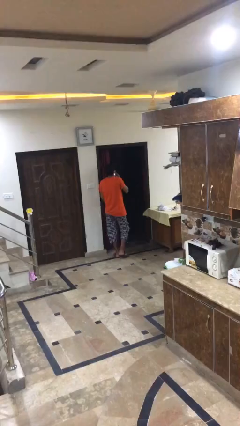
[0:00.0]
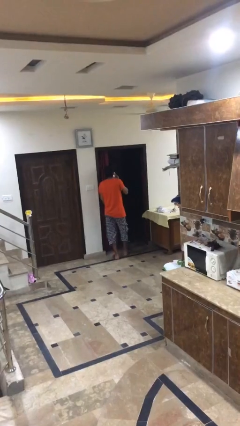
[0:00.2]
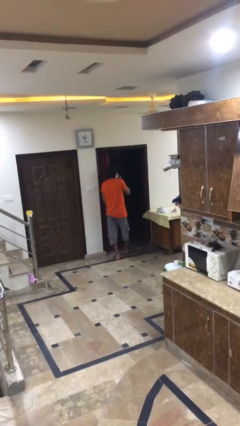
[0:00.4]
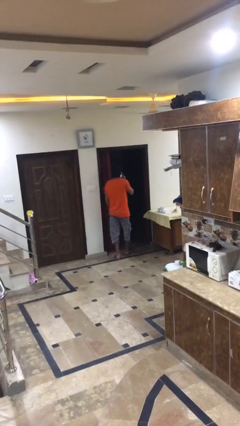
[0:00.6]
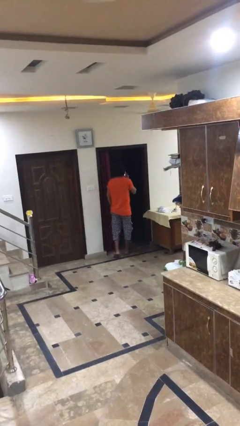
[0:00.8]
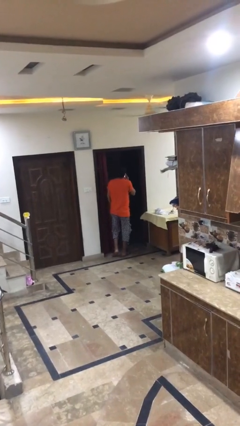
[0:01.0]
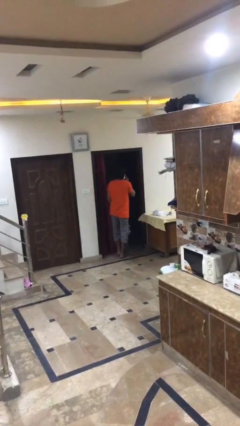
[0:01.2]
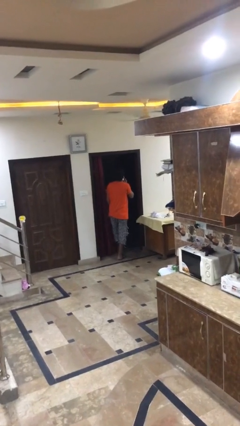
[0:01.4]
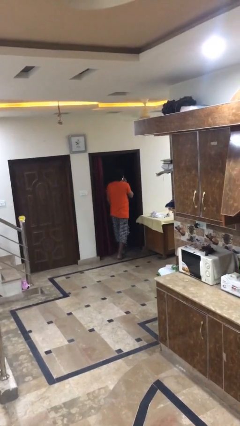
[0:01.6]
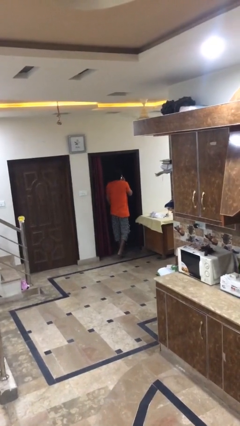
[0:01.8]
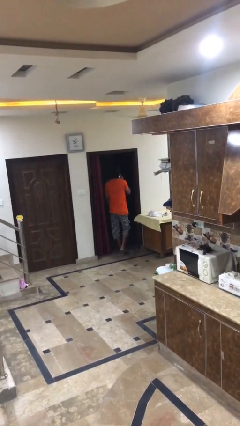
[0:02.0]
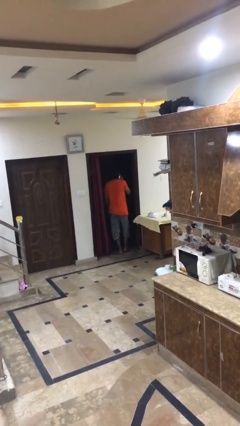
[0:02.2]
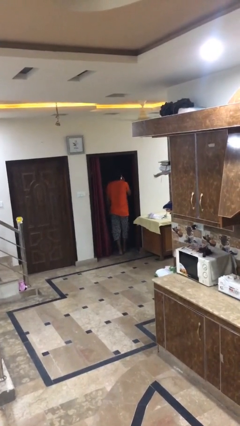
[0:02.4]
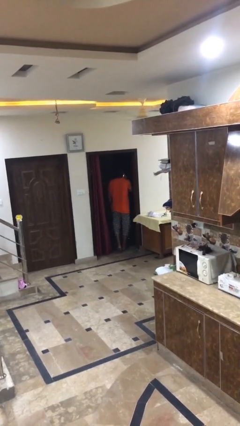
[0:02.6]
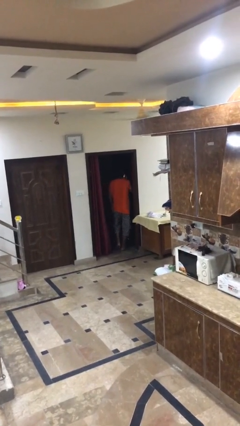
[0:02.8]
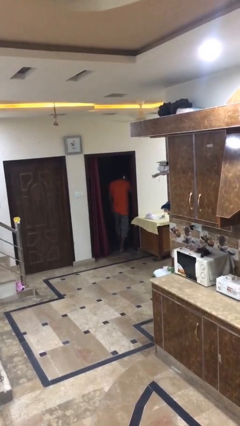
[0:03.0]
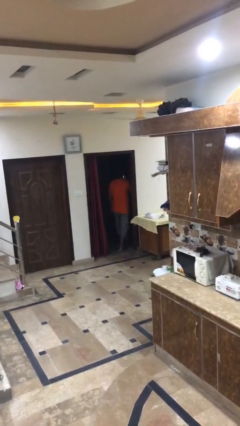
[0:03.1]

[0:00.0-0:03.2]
person exits scene through structure

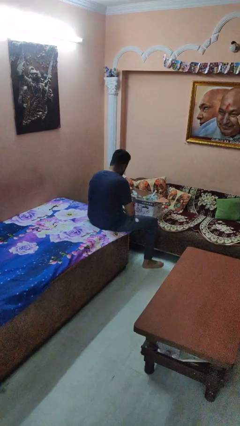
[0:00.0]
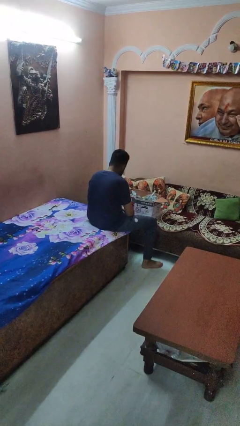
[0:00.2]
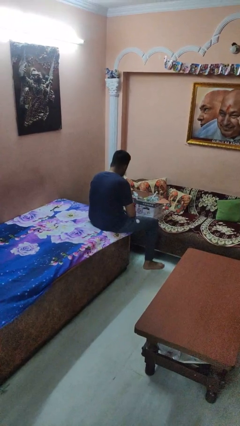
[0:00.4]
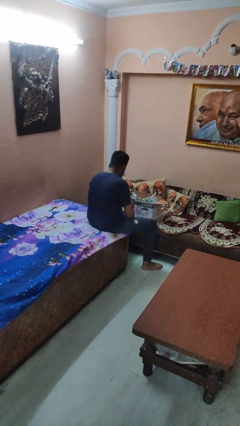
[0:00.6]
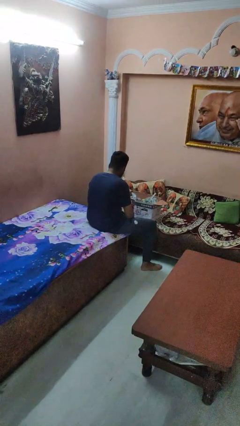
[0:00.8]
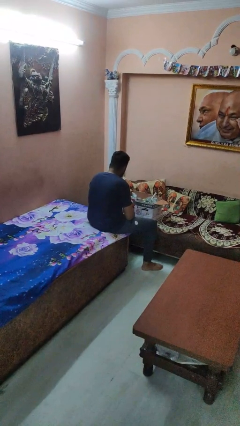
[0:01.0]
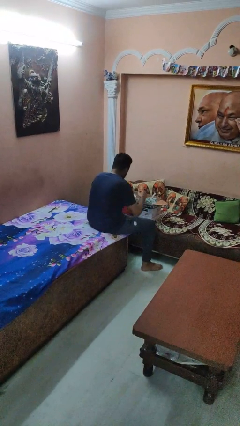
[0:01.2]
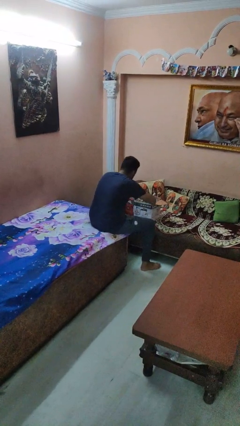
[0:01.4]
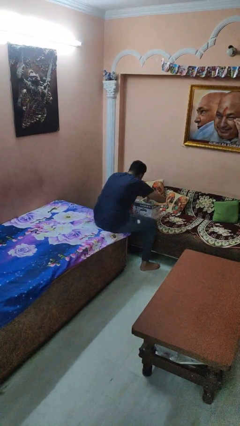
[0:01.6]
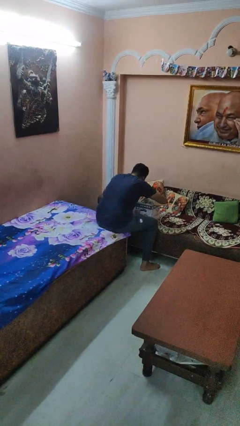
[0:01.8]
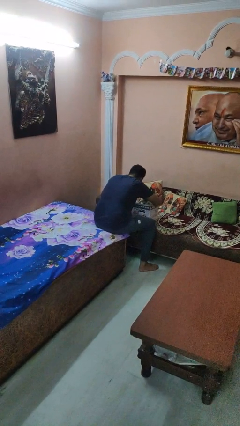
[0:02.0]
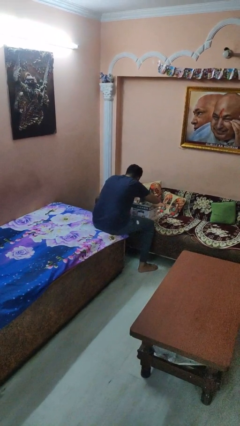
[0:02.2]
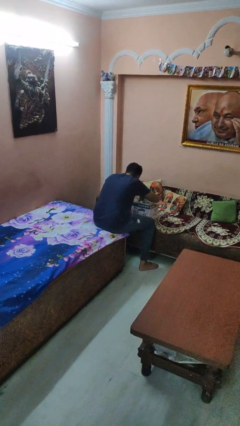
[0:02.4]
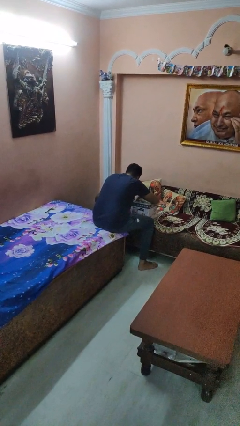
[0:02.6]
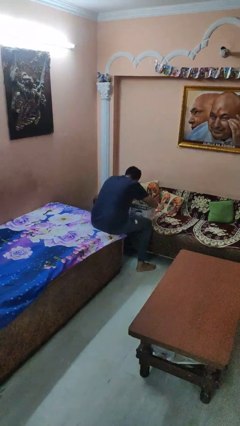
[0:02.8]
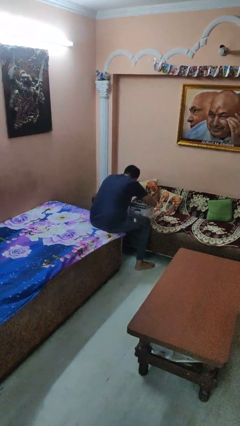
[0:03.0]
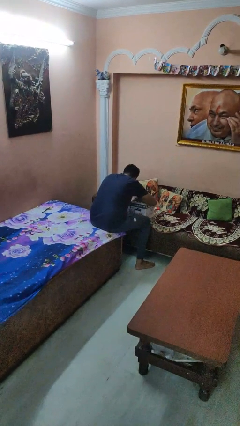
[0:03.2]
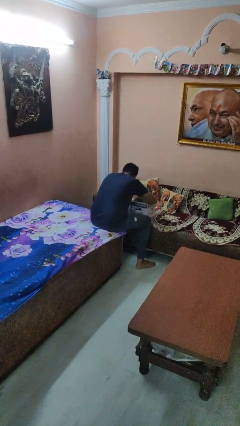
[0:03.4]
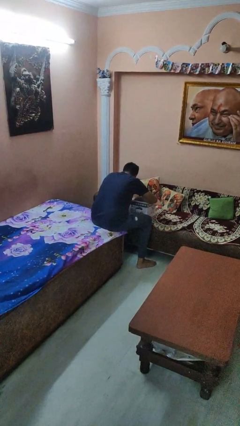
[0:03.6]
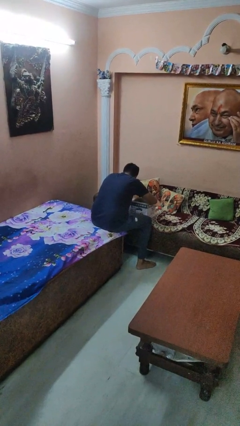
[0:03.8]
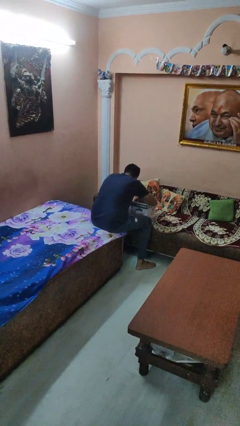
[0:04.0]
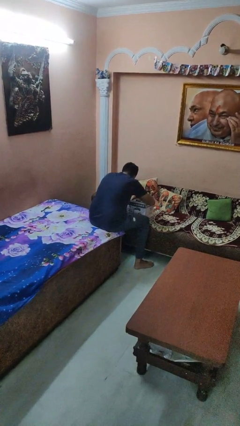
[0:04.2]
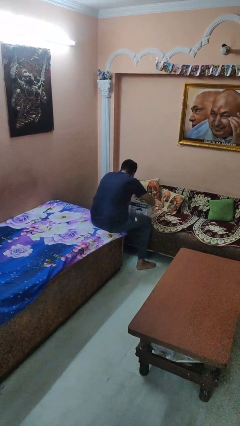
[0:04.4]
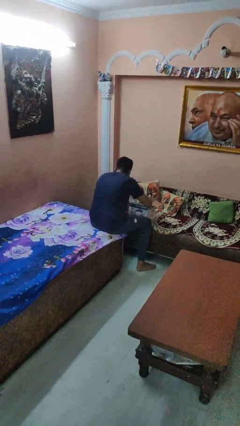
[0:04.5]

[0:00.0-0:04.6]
person searches in box

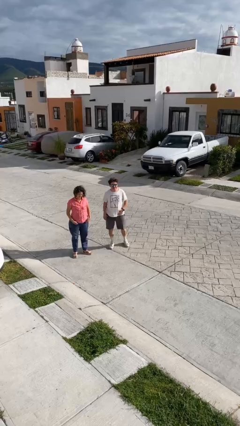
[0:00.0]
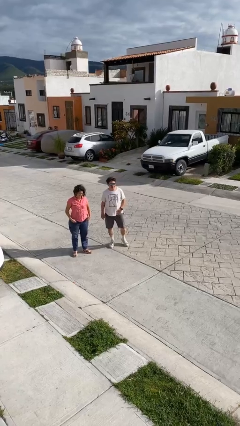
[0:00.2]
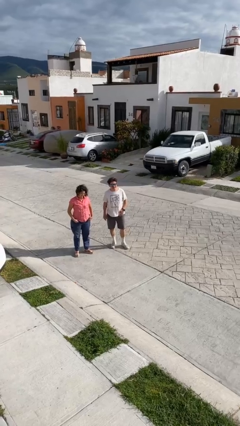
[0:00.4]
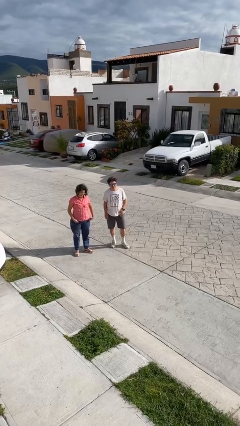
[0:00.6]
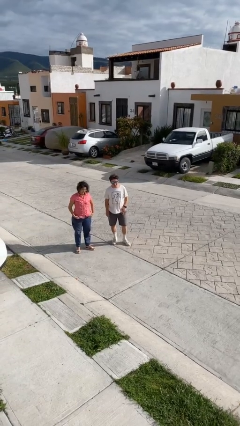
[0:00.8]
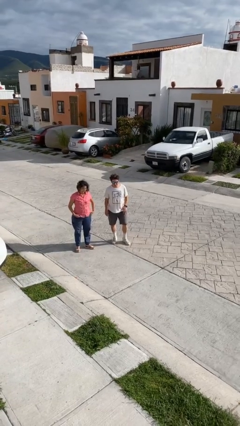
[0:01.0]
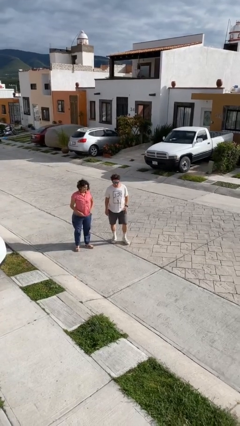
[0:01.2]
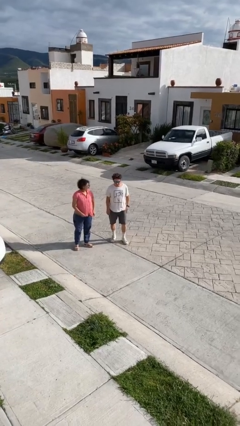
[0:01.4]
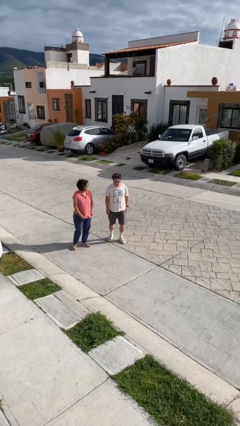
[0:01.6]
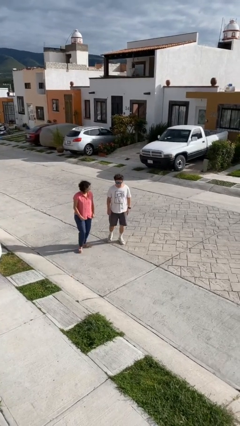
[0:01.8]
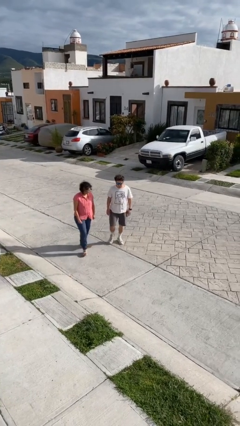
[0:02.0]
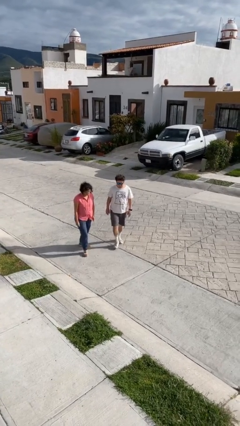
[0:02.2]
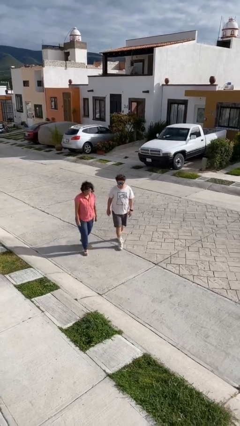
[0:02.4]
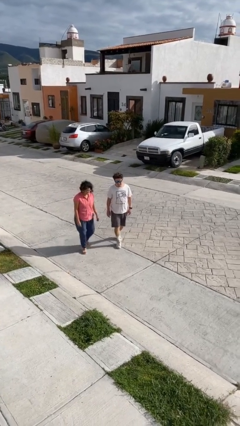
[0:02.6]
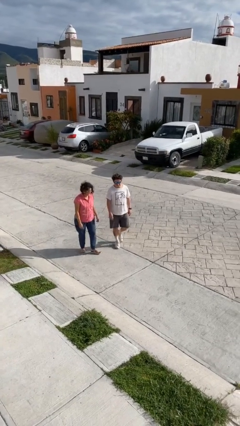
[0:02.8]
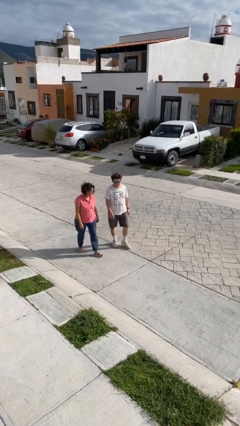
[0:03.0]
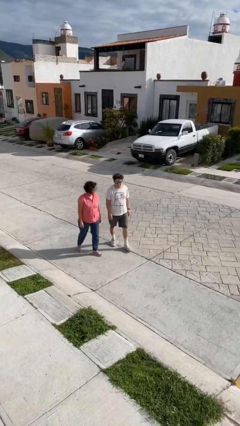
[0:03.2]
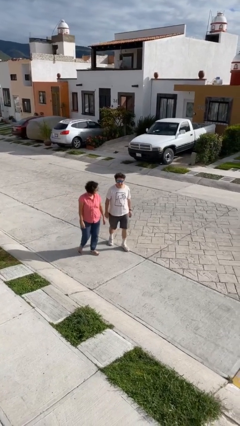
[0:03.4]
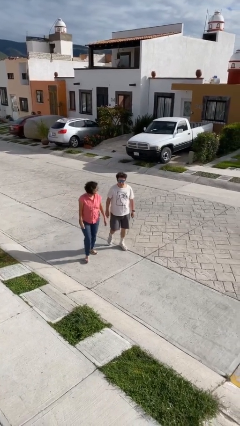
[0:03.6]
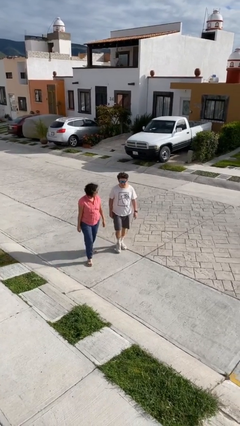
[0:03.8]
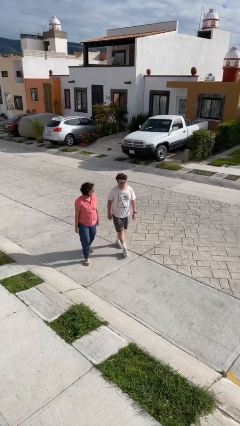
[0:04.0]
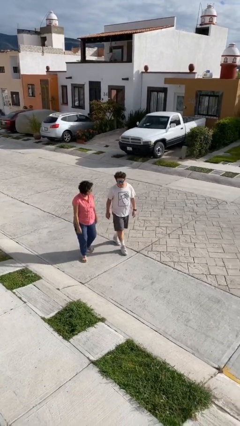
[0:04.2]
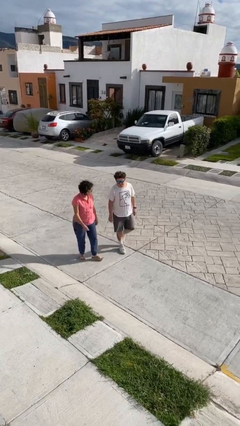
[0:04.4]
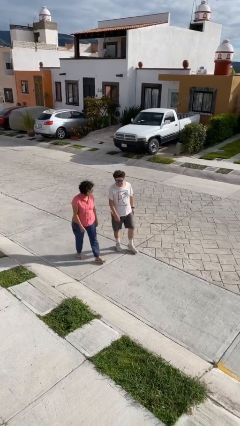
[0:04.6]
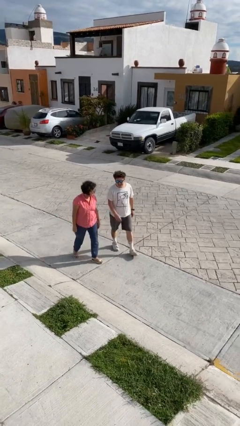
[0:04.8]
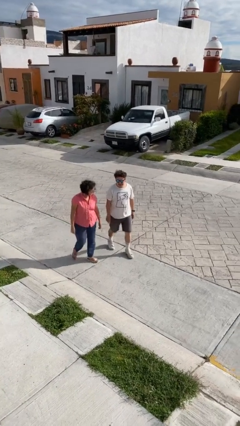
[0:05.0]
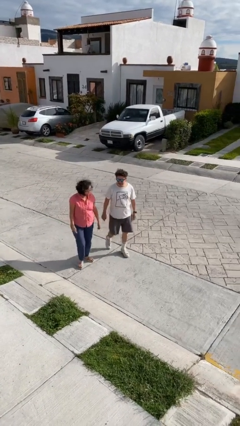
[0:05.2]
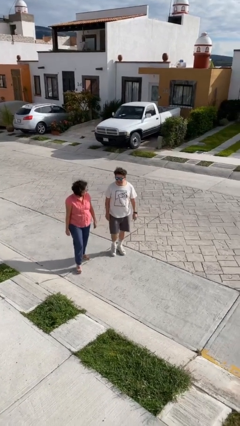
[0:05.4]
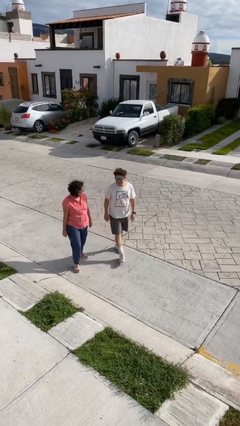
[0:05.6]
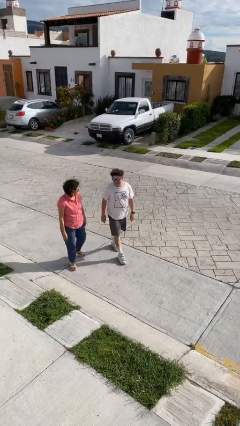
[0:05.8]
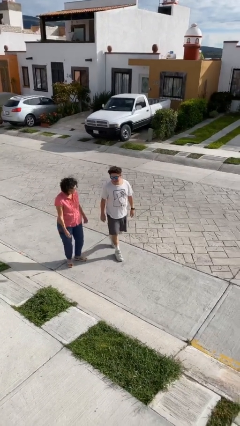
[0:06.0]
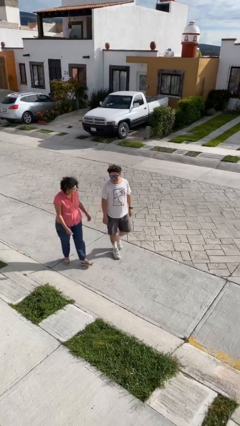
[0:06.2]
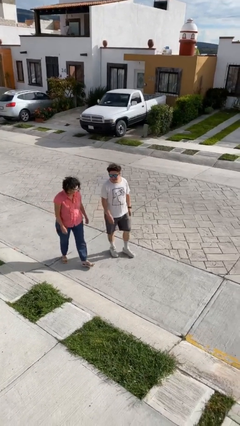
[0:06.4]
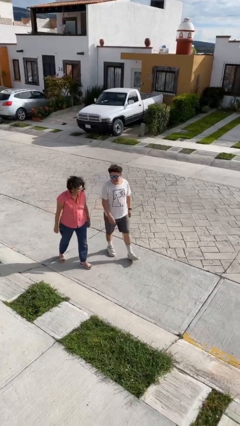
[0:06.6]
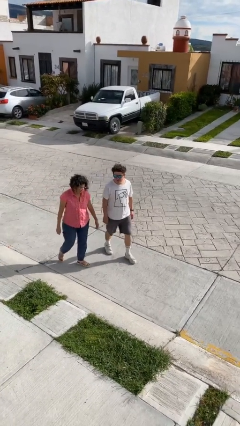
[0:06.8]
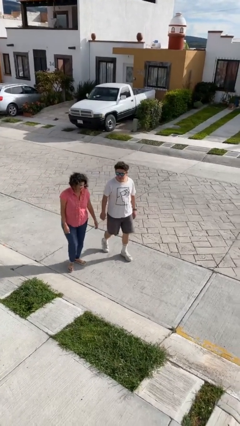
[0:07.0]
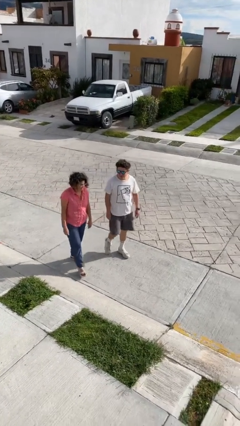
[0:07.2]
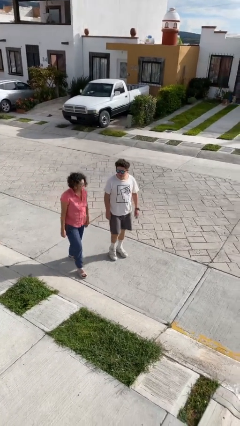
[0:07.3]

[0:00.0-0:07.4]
person talks to person

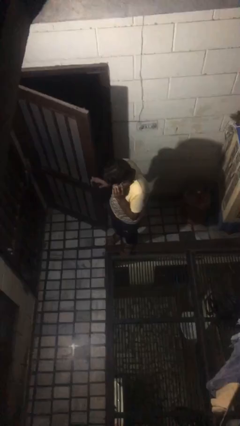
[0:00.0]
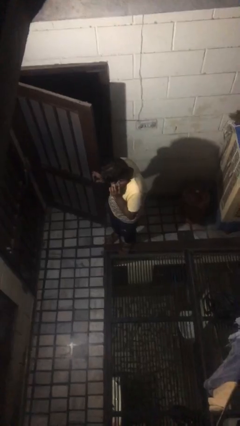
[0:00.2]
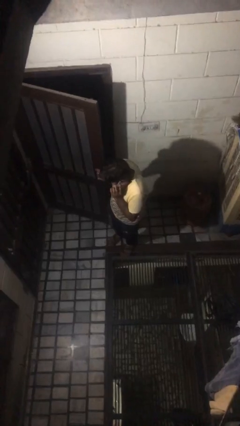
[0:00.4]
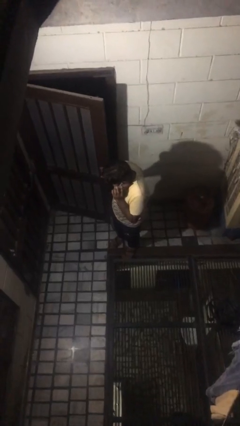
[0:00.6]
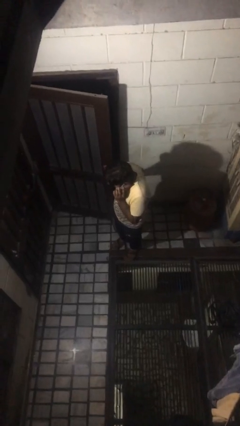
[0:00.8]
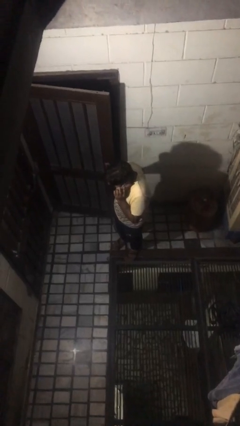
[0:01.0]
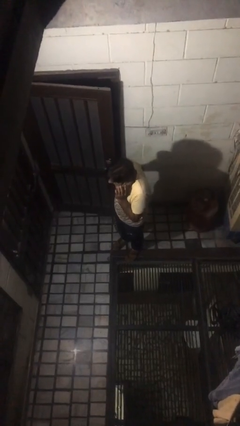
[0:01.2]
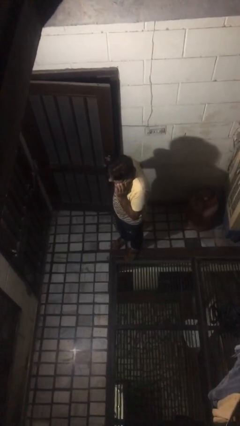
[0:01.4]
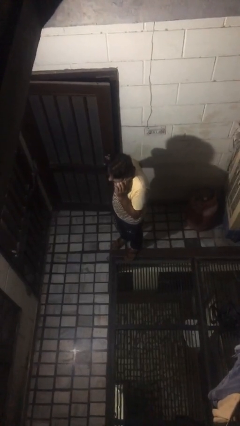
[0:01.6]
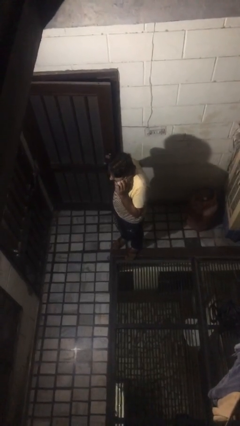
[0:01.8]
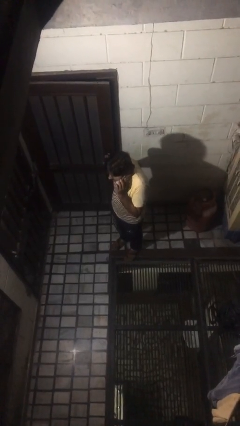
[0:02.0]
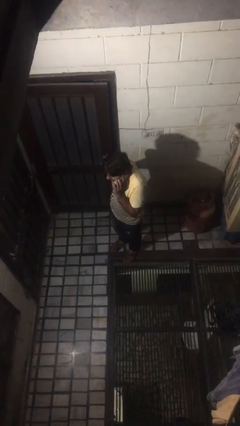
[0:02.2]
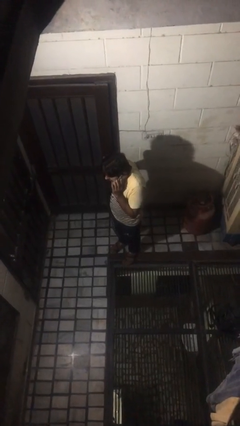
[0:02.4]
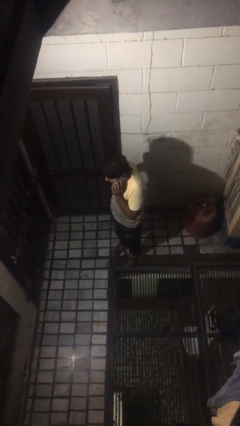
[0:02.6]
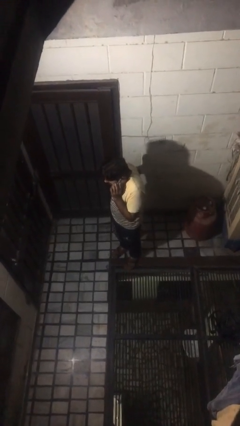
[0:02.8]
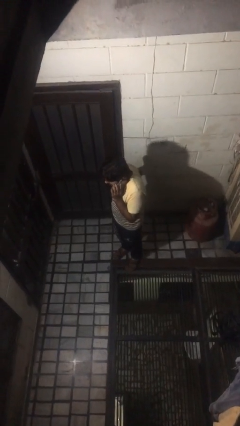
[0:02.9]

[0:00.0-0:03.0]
person closes facility door
